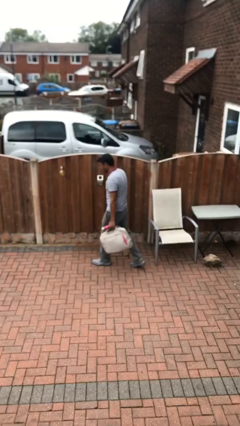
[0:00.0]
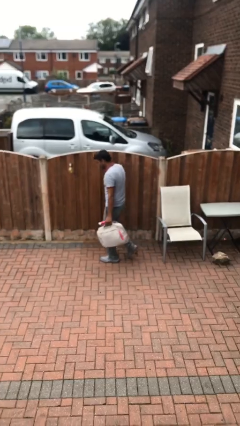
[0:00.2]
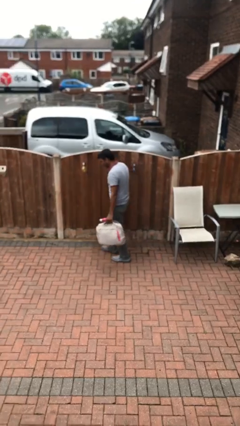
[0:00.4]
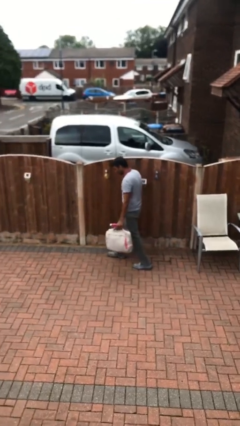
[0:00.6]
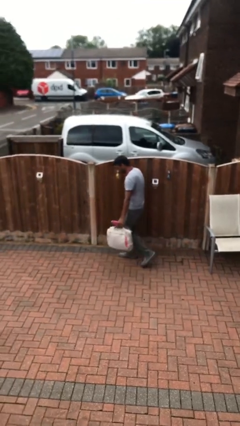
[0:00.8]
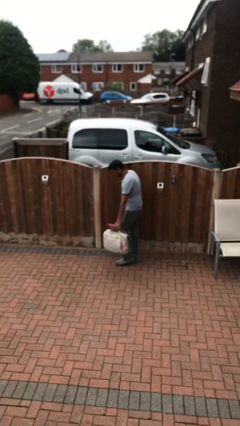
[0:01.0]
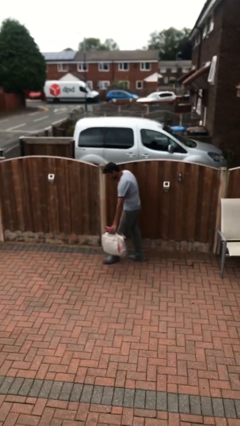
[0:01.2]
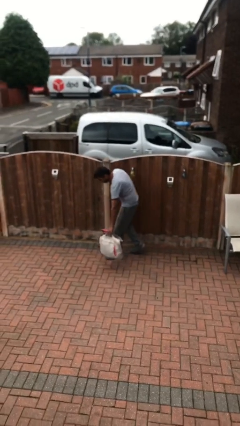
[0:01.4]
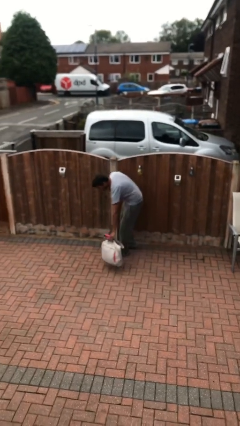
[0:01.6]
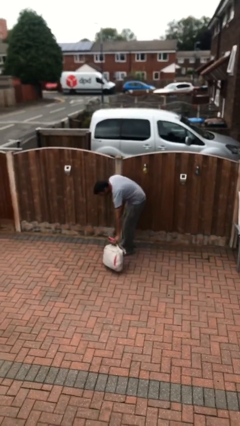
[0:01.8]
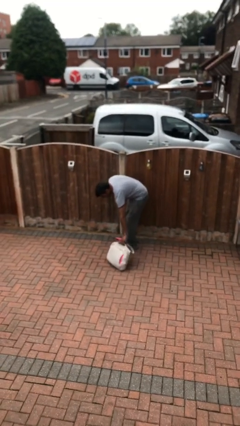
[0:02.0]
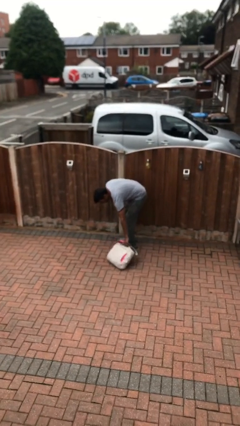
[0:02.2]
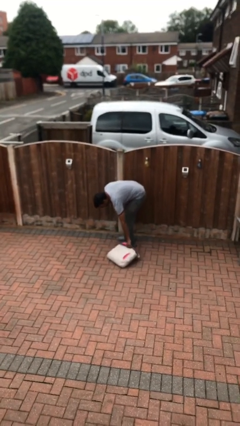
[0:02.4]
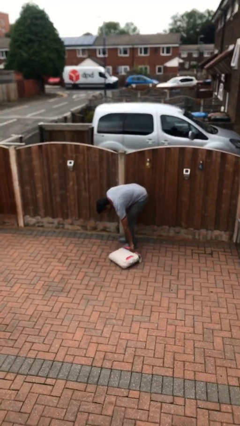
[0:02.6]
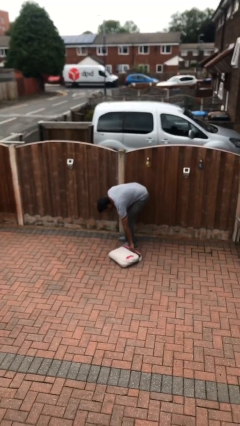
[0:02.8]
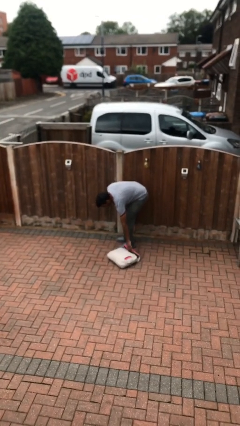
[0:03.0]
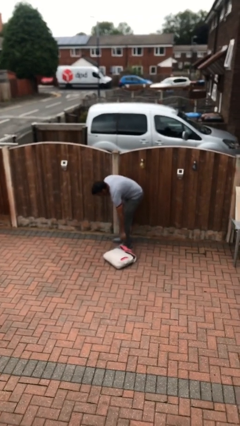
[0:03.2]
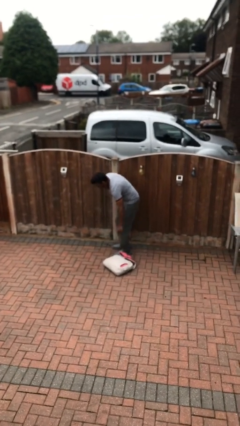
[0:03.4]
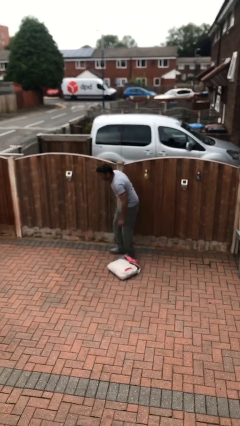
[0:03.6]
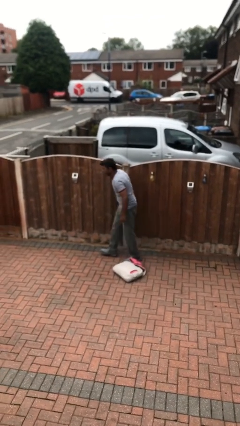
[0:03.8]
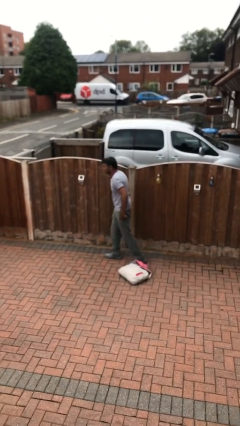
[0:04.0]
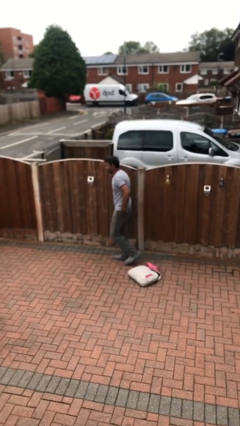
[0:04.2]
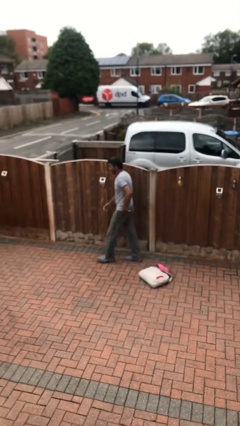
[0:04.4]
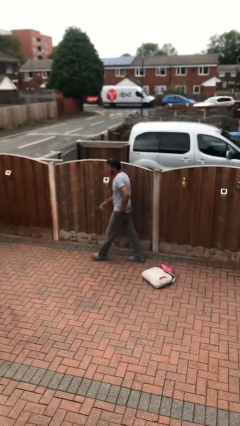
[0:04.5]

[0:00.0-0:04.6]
person puts down object on floor

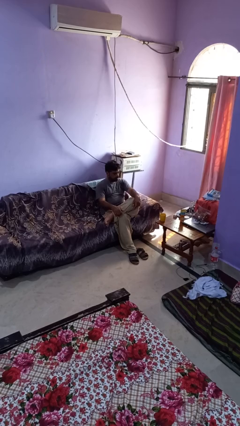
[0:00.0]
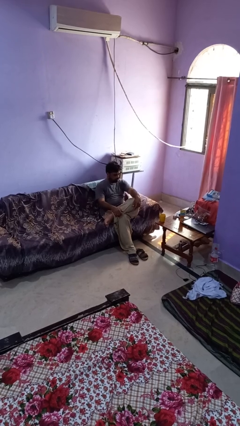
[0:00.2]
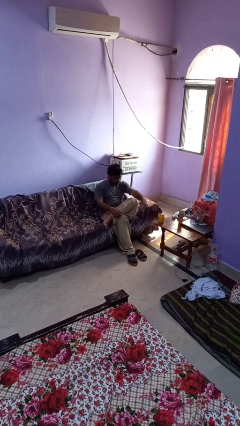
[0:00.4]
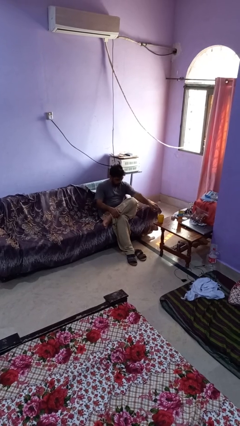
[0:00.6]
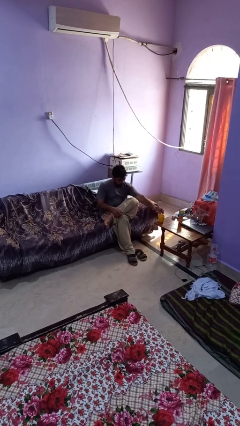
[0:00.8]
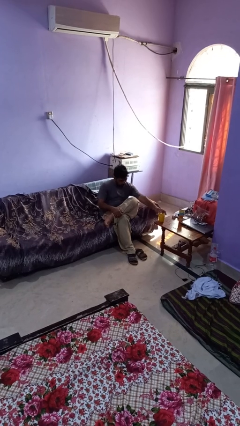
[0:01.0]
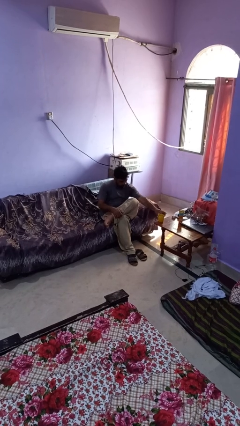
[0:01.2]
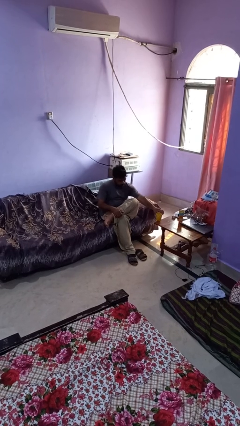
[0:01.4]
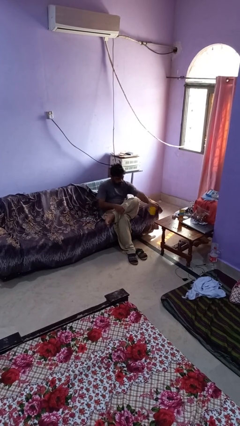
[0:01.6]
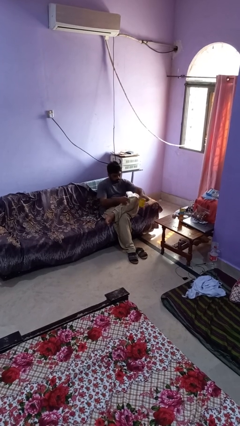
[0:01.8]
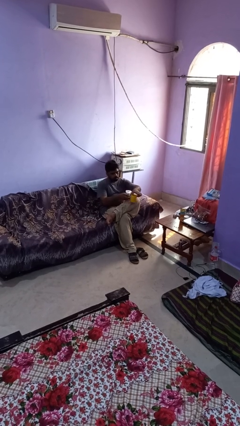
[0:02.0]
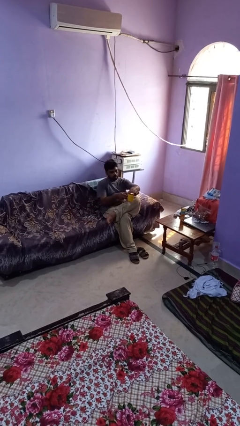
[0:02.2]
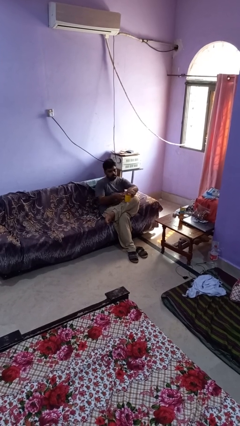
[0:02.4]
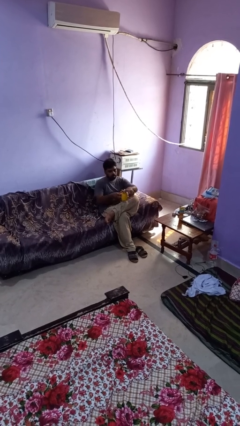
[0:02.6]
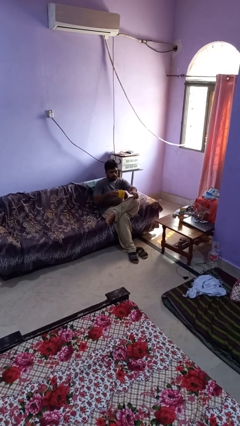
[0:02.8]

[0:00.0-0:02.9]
person picks up object from table

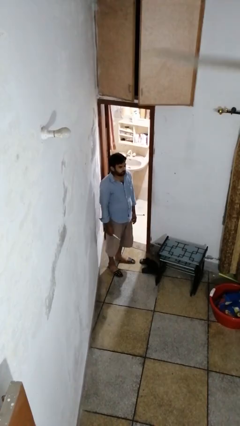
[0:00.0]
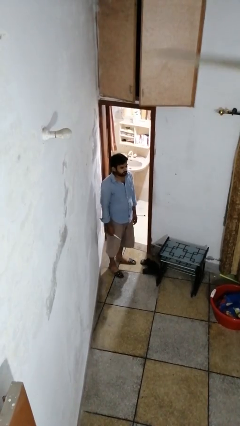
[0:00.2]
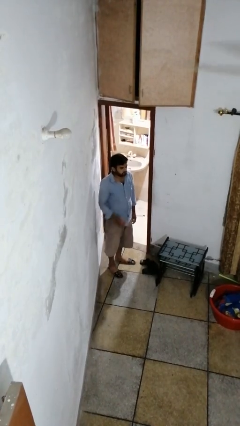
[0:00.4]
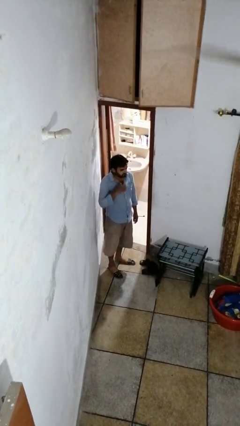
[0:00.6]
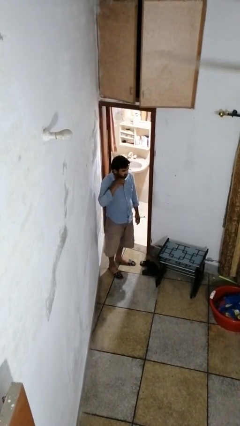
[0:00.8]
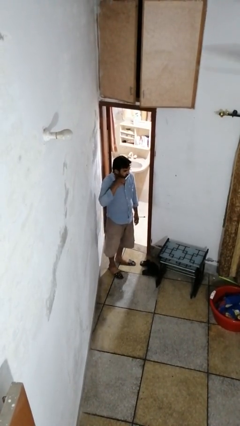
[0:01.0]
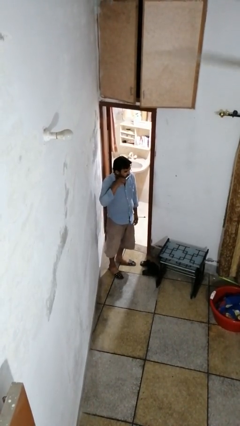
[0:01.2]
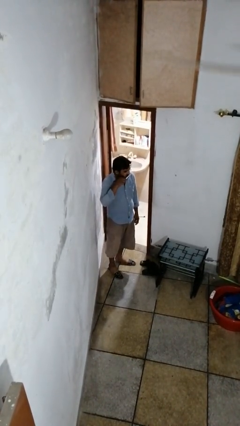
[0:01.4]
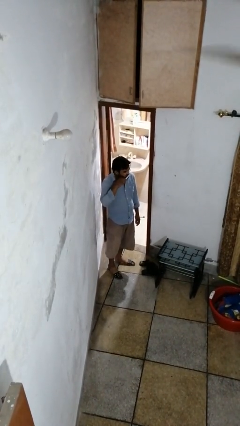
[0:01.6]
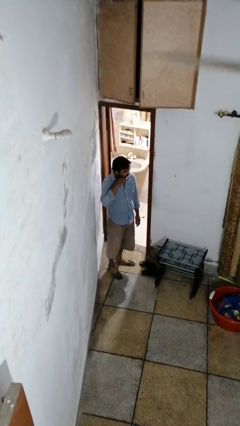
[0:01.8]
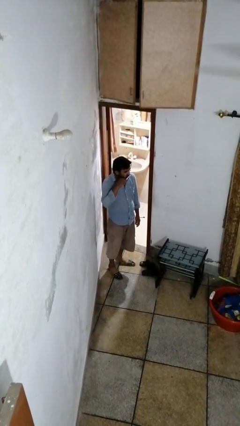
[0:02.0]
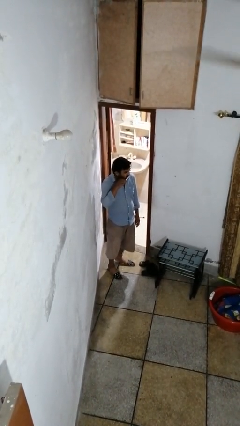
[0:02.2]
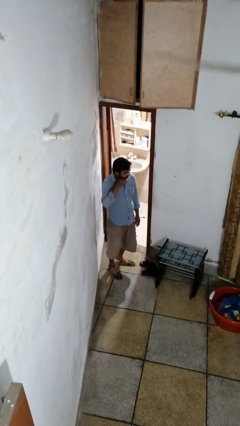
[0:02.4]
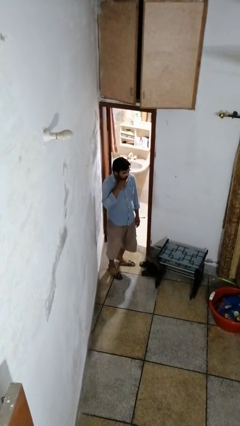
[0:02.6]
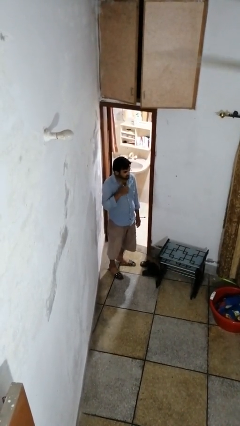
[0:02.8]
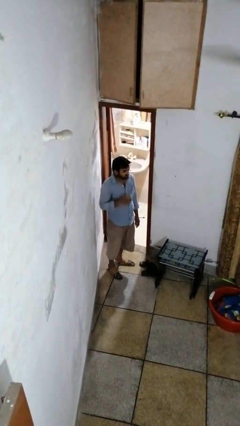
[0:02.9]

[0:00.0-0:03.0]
person brushes teeth

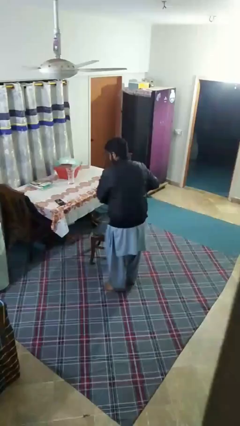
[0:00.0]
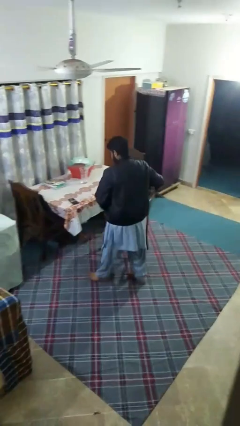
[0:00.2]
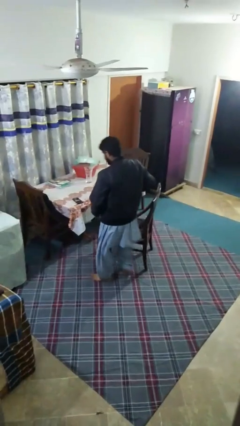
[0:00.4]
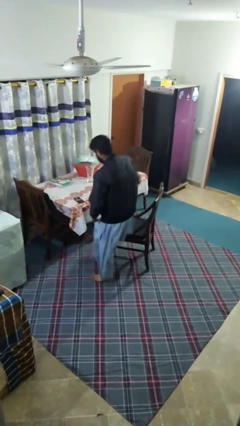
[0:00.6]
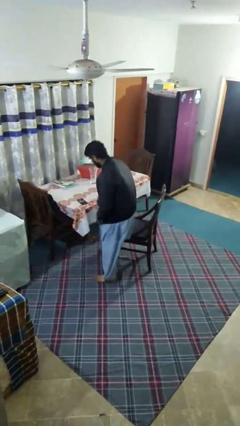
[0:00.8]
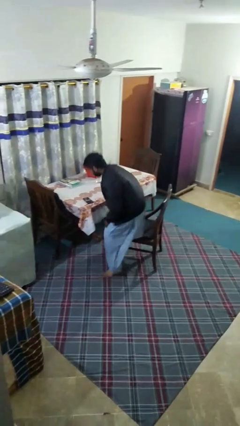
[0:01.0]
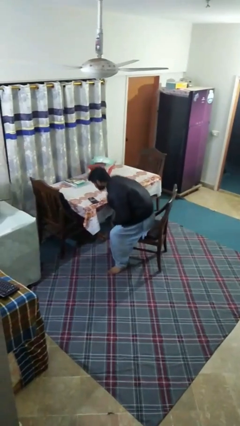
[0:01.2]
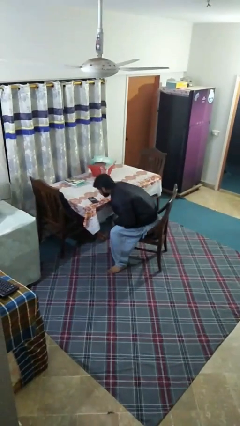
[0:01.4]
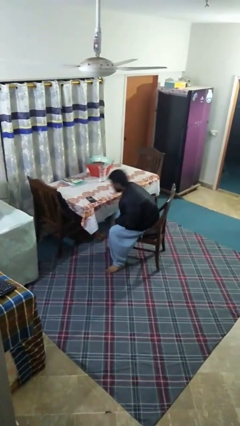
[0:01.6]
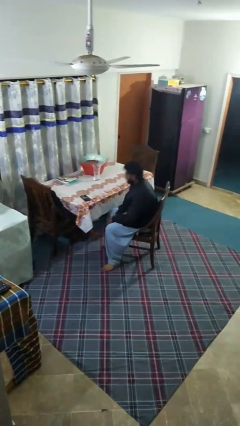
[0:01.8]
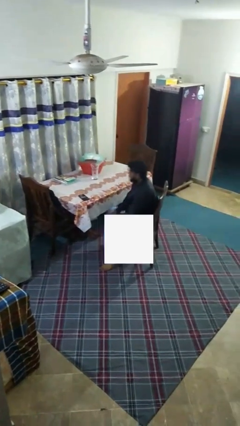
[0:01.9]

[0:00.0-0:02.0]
person sits down

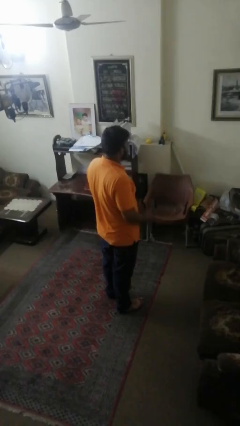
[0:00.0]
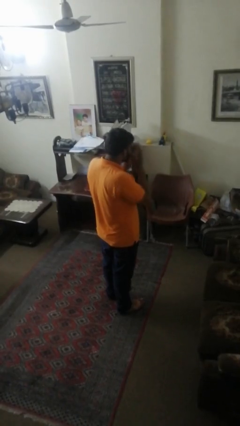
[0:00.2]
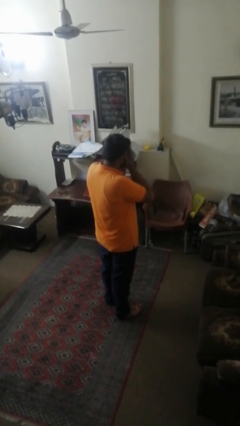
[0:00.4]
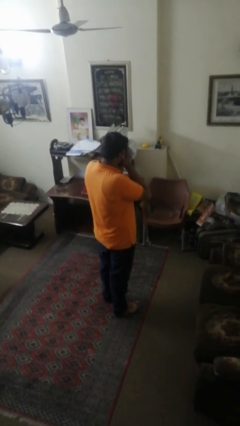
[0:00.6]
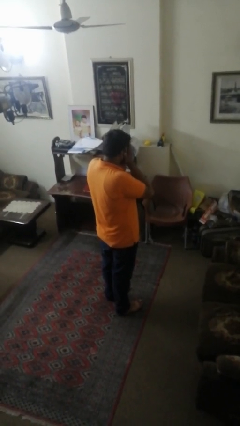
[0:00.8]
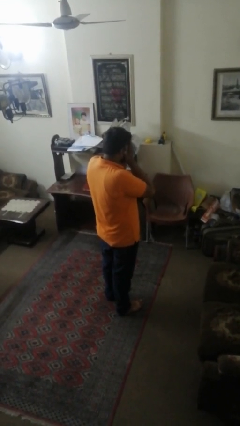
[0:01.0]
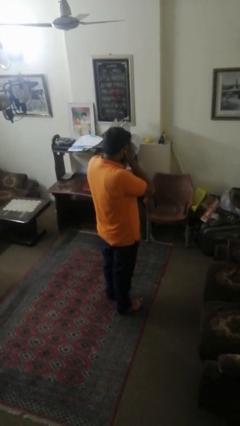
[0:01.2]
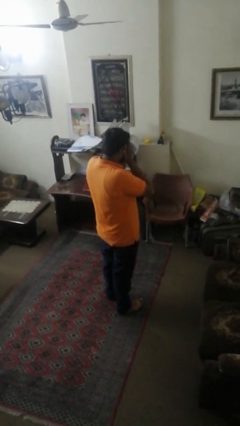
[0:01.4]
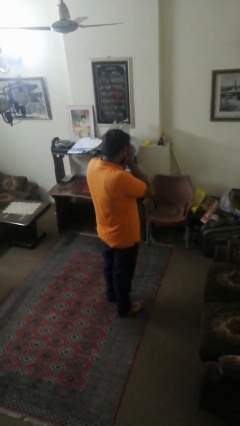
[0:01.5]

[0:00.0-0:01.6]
person covers face with hands

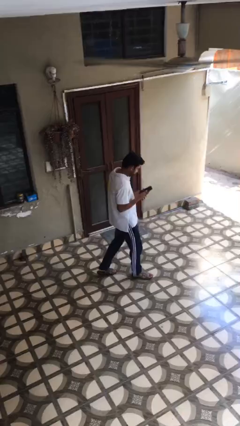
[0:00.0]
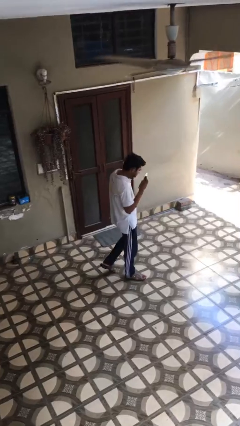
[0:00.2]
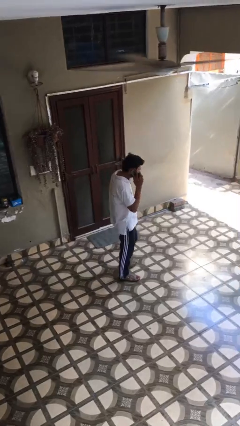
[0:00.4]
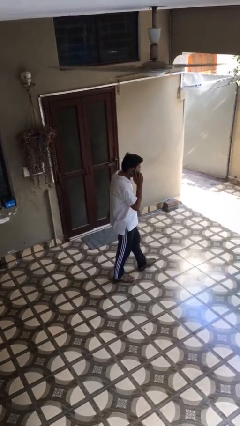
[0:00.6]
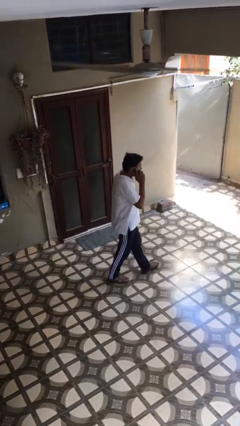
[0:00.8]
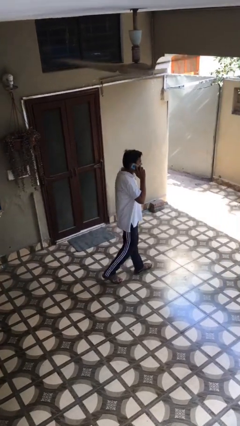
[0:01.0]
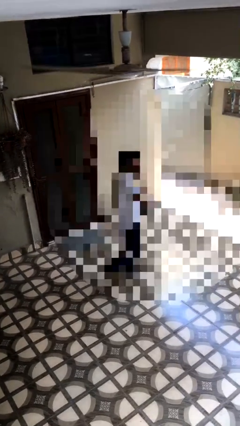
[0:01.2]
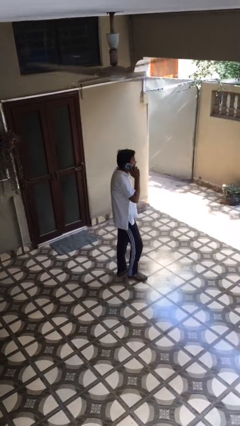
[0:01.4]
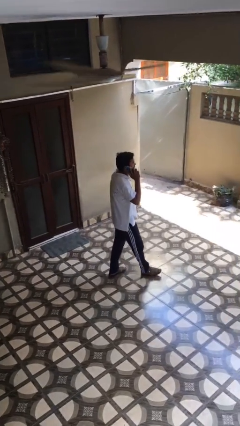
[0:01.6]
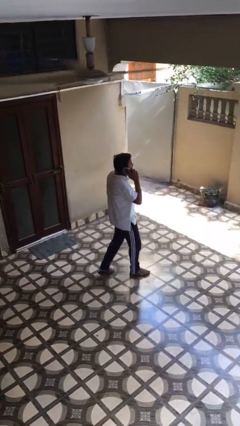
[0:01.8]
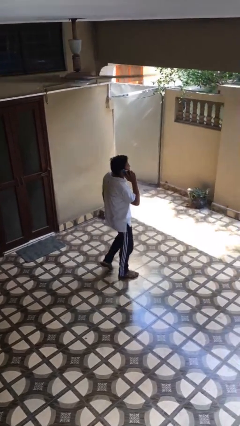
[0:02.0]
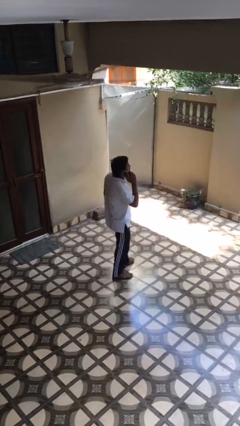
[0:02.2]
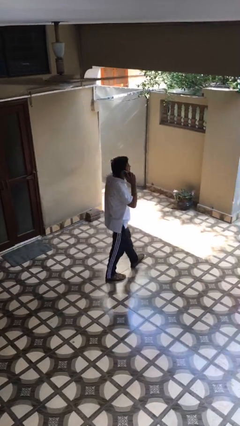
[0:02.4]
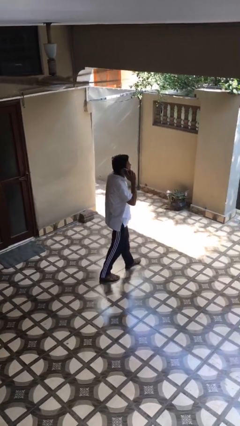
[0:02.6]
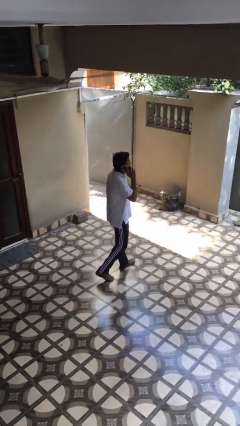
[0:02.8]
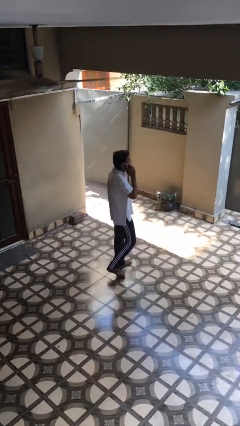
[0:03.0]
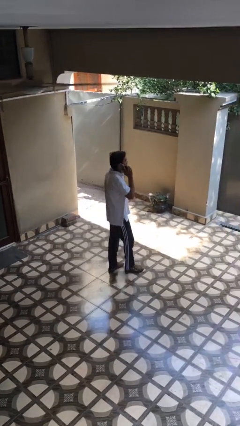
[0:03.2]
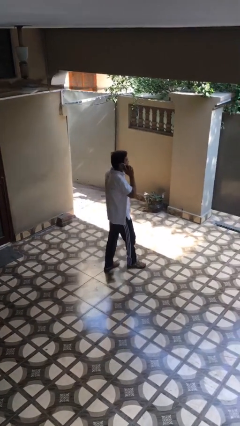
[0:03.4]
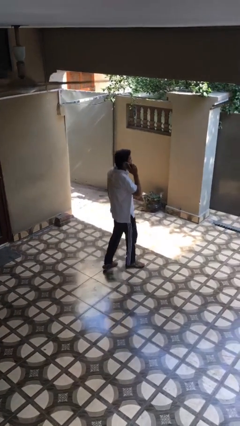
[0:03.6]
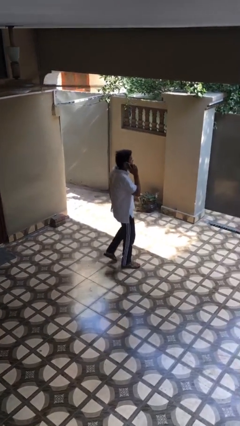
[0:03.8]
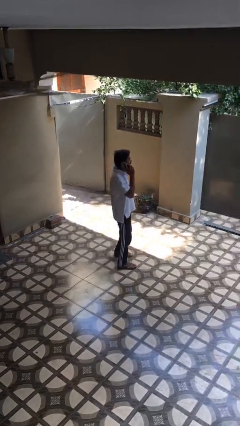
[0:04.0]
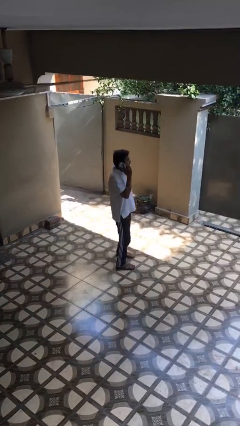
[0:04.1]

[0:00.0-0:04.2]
person talks on phone
